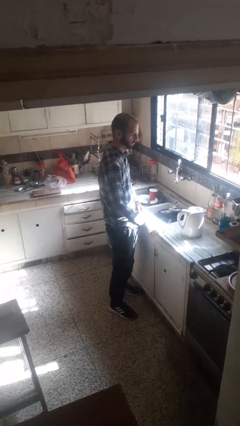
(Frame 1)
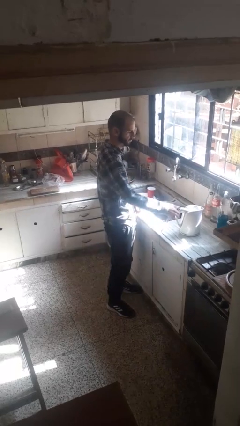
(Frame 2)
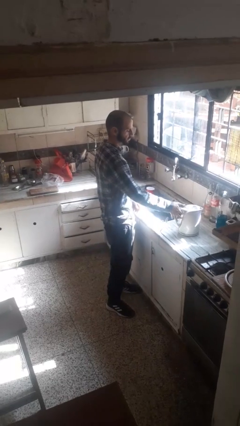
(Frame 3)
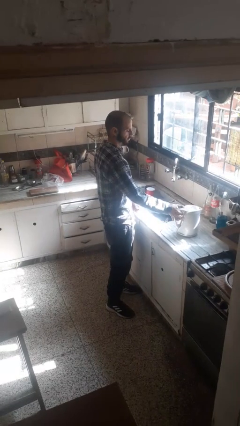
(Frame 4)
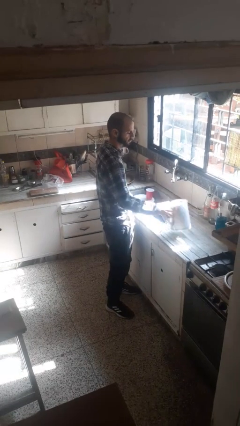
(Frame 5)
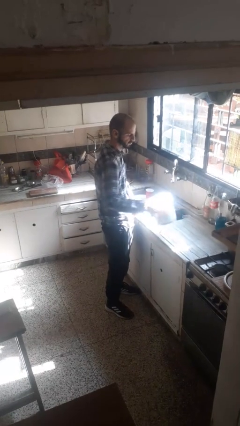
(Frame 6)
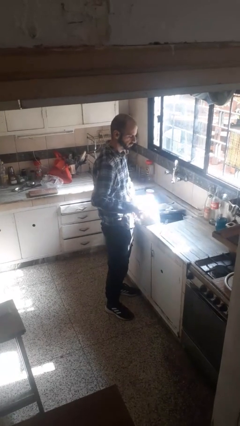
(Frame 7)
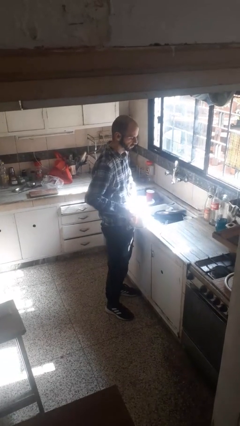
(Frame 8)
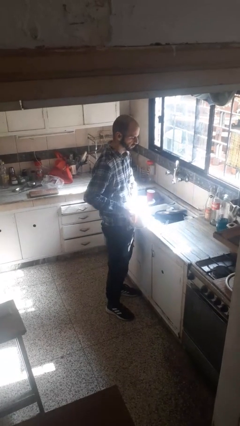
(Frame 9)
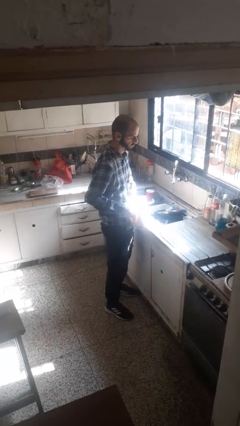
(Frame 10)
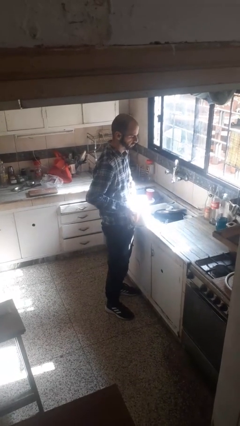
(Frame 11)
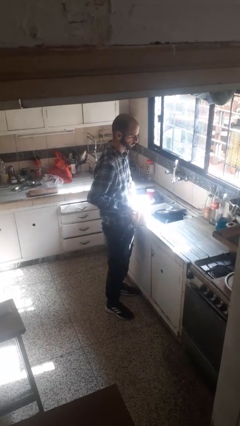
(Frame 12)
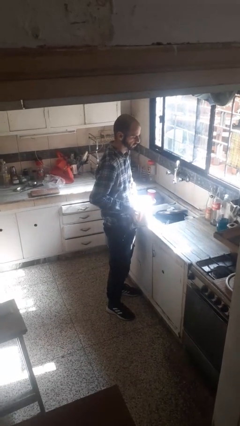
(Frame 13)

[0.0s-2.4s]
person picks up object from countertop

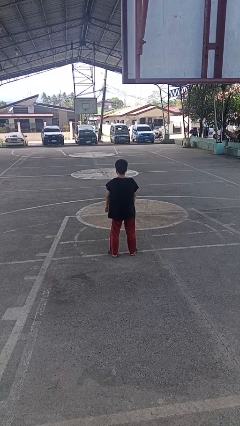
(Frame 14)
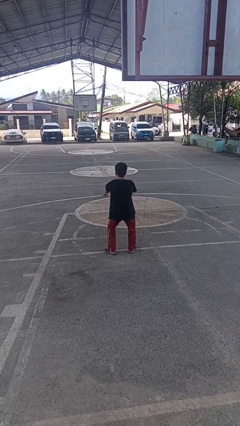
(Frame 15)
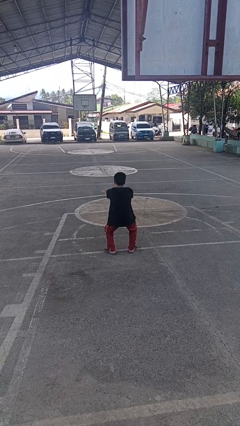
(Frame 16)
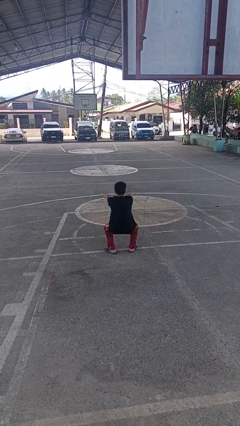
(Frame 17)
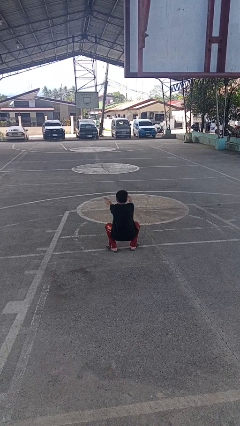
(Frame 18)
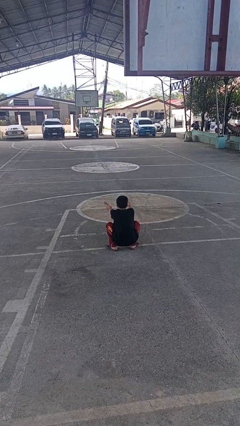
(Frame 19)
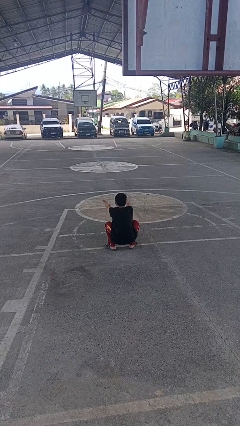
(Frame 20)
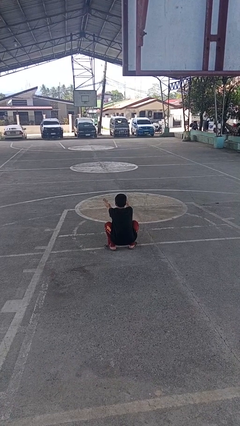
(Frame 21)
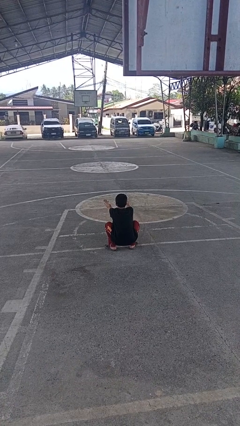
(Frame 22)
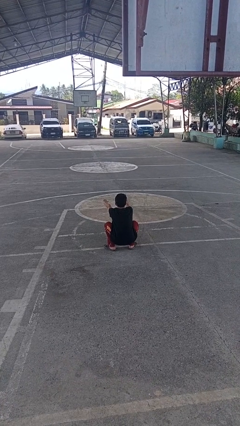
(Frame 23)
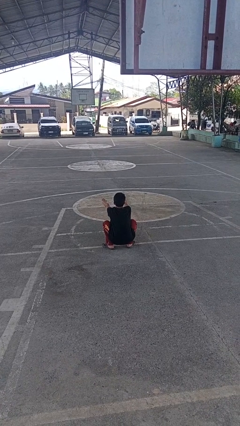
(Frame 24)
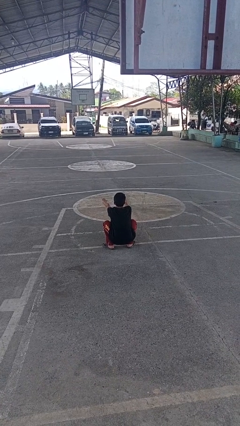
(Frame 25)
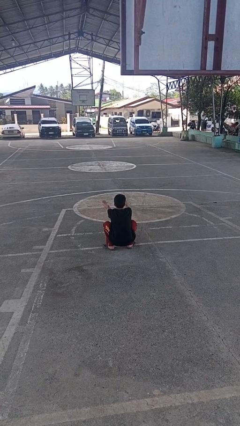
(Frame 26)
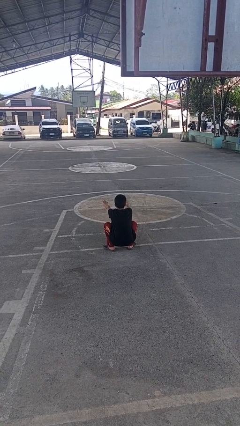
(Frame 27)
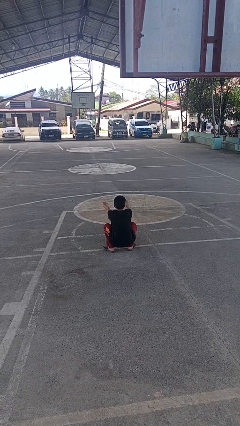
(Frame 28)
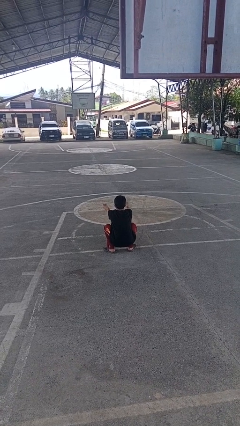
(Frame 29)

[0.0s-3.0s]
person squats

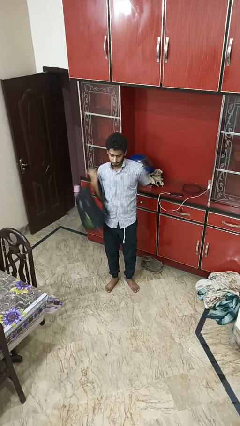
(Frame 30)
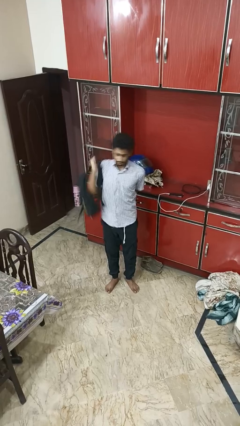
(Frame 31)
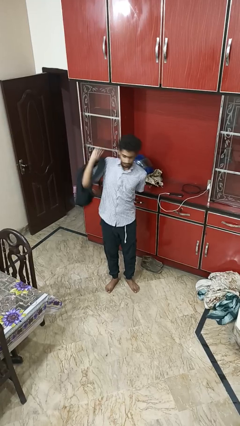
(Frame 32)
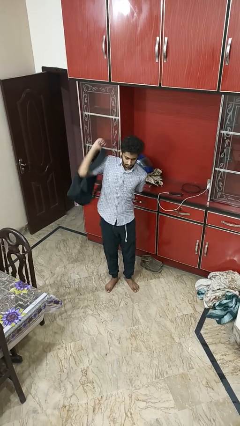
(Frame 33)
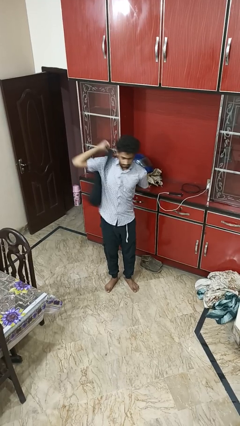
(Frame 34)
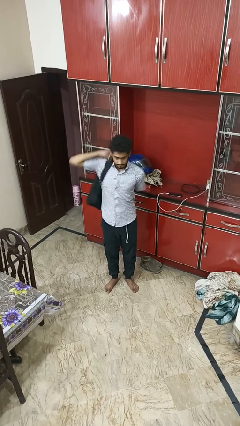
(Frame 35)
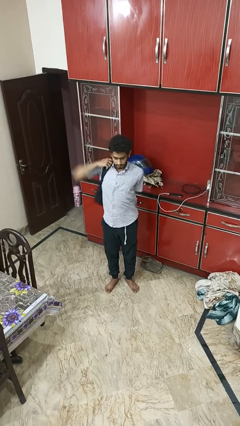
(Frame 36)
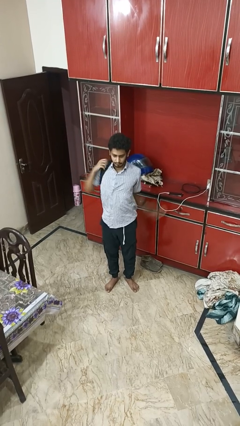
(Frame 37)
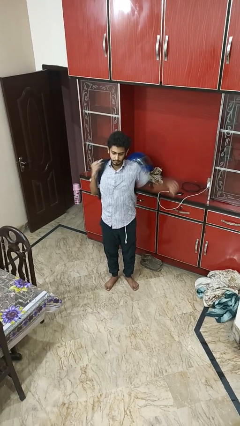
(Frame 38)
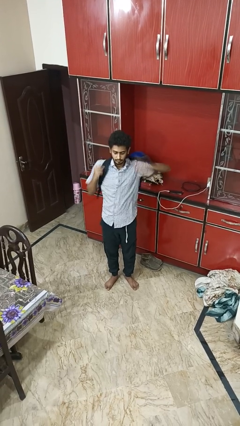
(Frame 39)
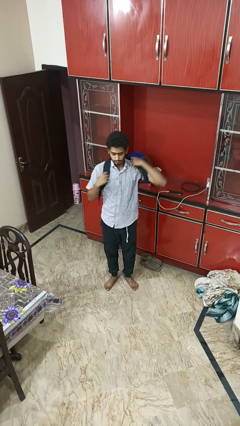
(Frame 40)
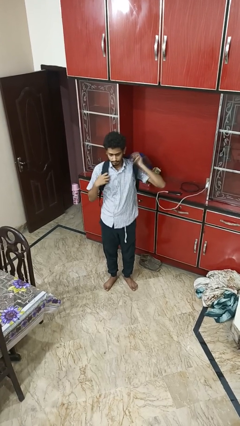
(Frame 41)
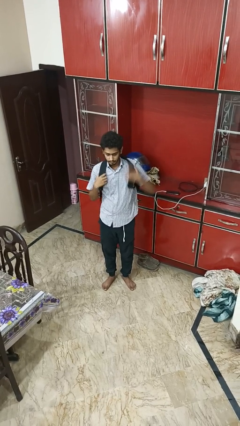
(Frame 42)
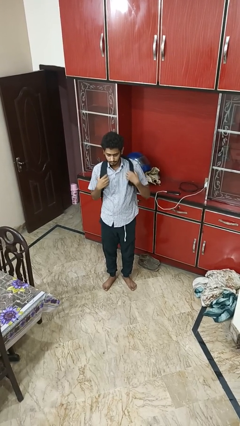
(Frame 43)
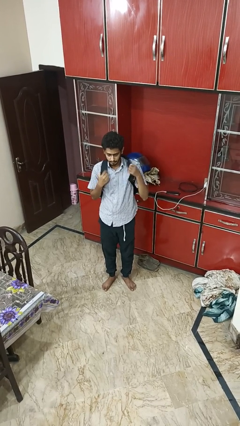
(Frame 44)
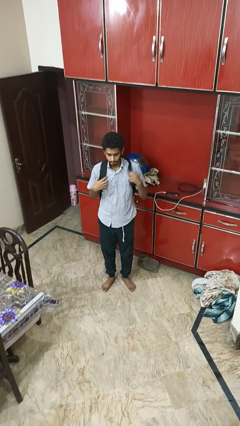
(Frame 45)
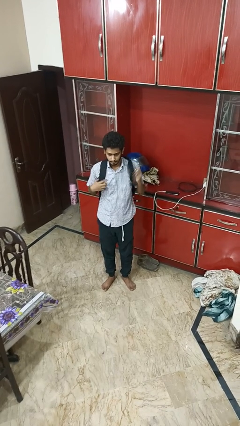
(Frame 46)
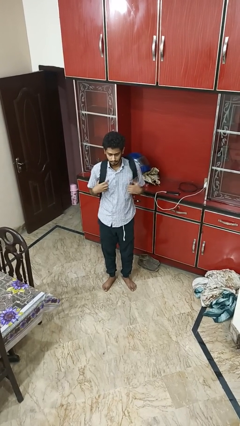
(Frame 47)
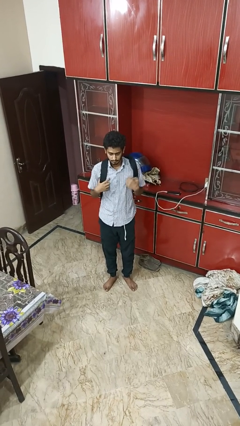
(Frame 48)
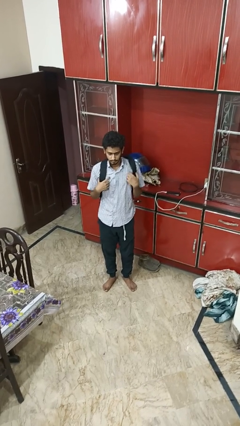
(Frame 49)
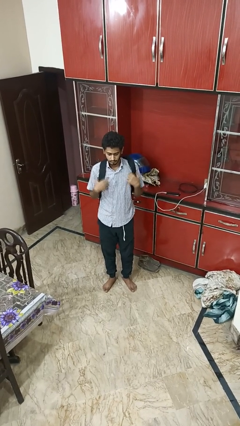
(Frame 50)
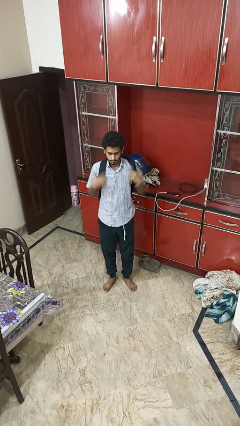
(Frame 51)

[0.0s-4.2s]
person puts on backpack

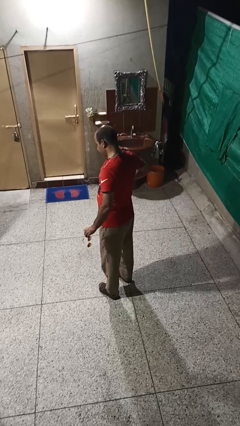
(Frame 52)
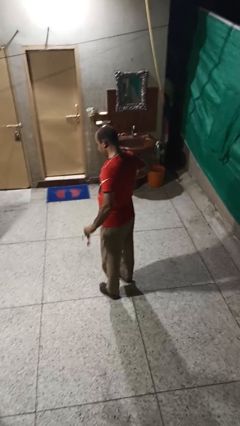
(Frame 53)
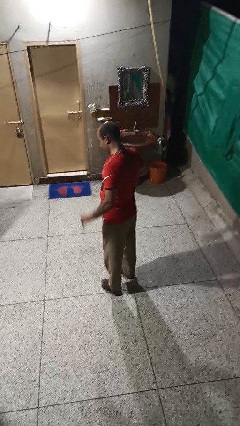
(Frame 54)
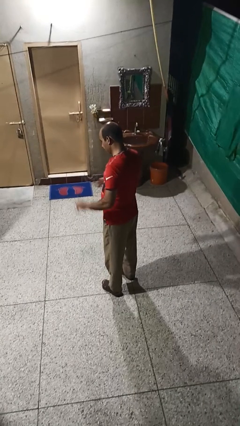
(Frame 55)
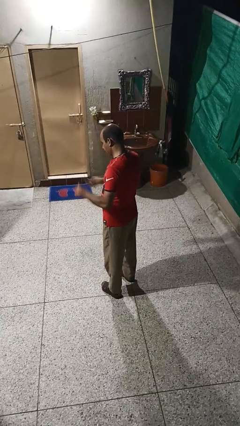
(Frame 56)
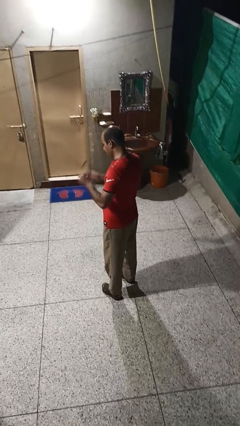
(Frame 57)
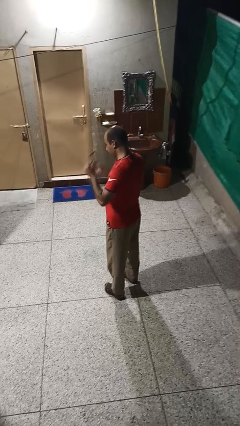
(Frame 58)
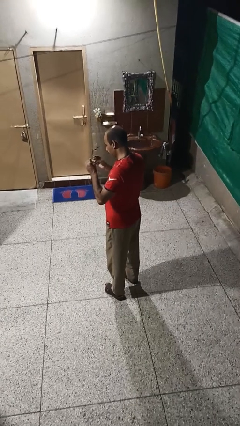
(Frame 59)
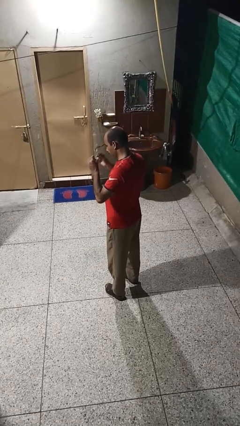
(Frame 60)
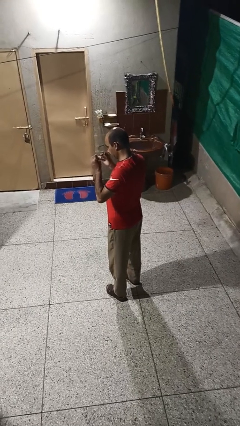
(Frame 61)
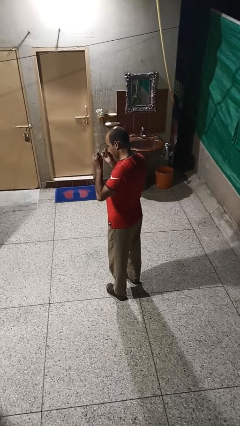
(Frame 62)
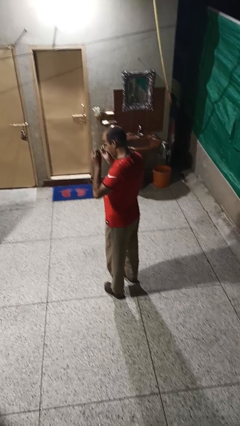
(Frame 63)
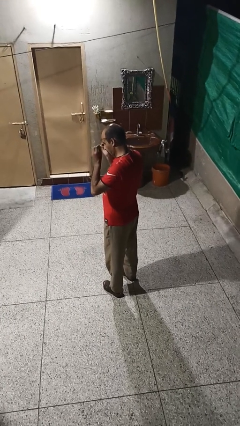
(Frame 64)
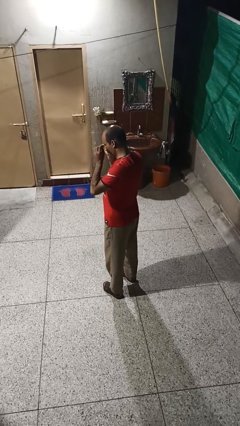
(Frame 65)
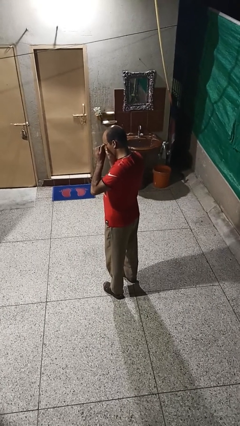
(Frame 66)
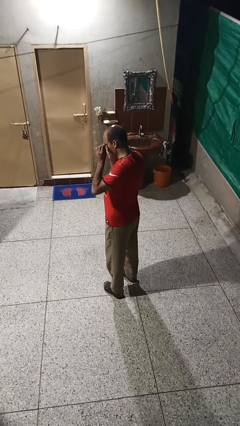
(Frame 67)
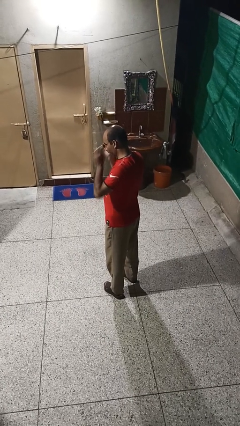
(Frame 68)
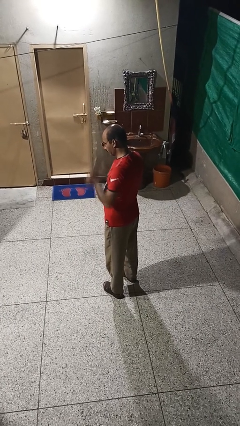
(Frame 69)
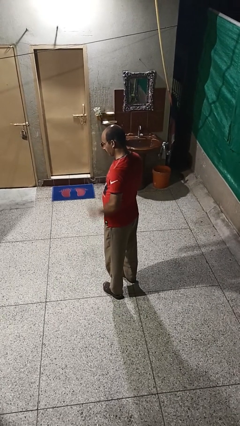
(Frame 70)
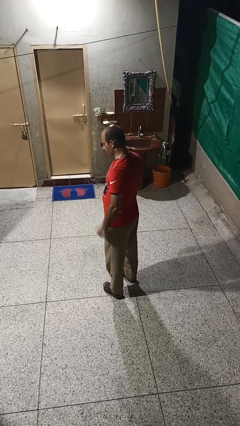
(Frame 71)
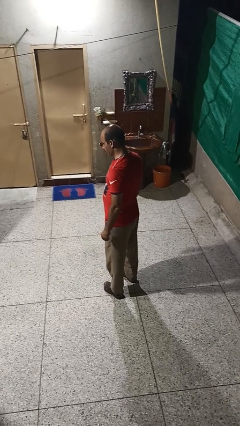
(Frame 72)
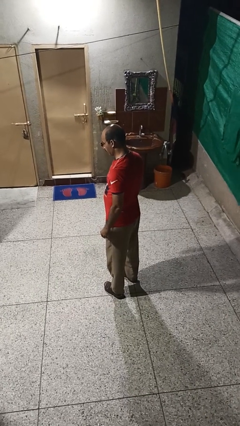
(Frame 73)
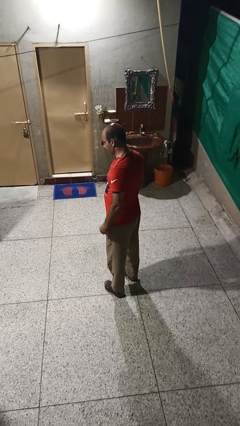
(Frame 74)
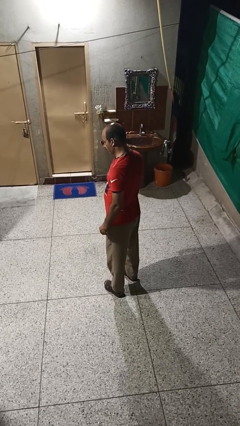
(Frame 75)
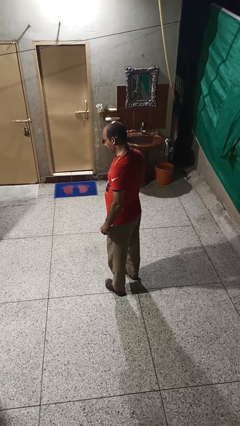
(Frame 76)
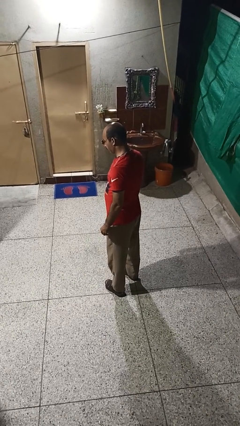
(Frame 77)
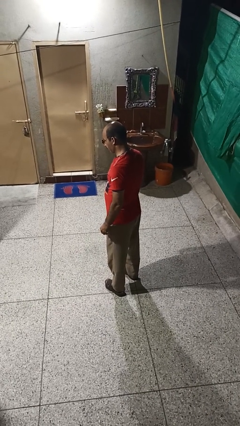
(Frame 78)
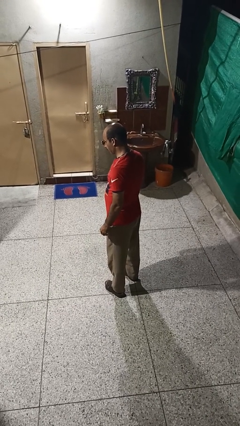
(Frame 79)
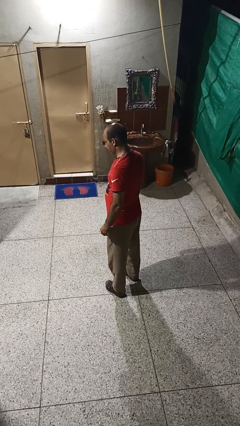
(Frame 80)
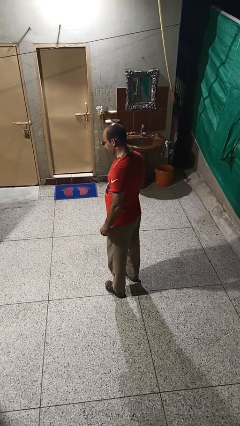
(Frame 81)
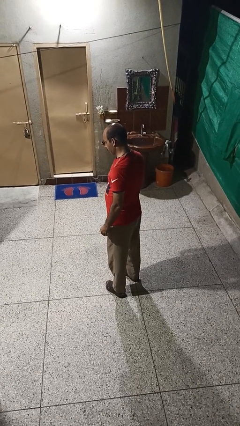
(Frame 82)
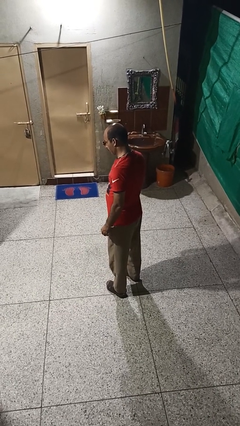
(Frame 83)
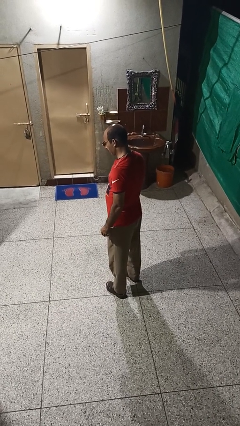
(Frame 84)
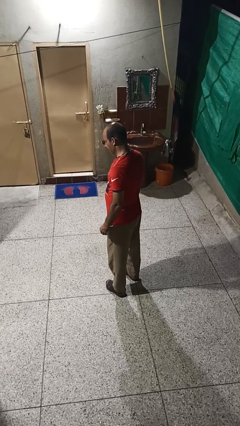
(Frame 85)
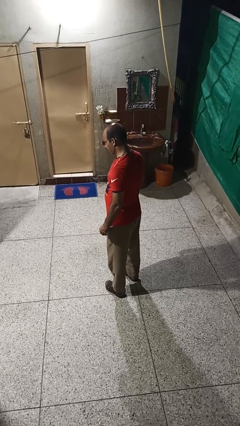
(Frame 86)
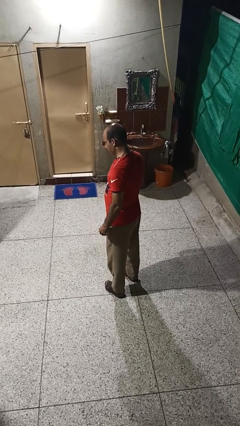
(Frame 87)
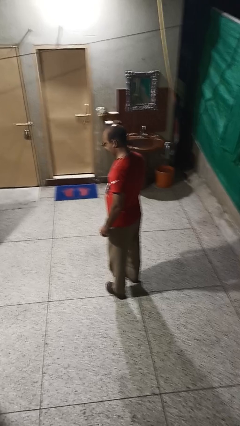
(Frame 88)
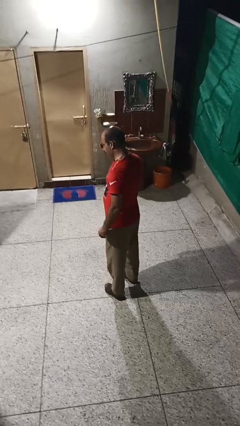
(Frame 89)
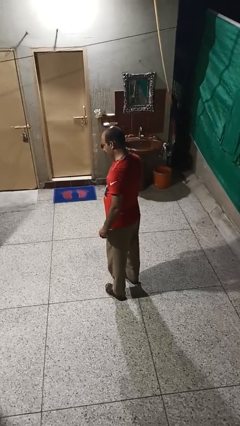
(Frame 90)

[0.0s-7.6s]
person puts on sunglasses

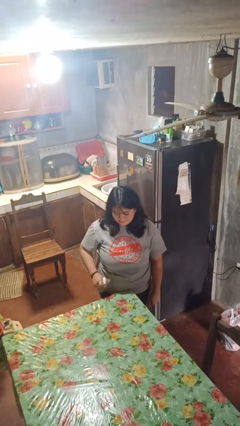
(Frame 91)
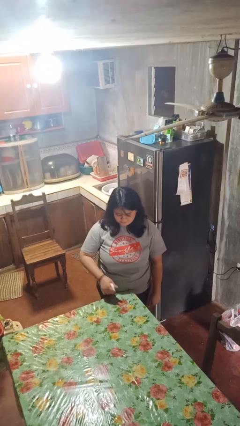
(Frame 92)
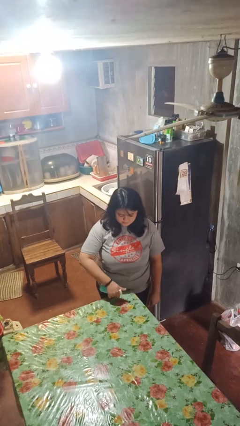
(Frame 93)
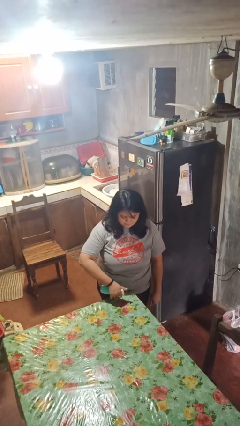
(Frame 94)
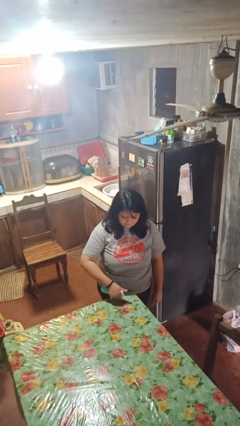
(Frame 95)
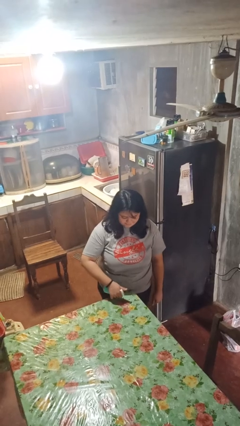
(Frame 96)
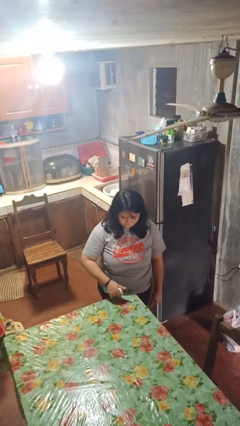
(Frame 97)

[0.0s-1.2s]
person sprays from bottle
